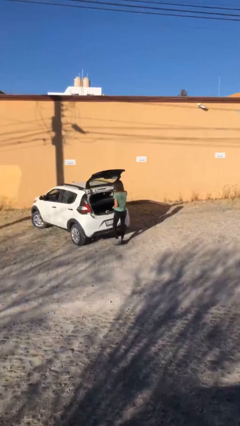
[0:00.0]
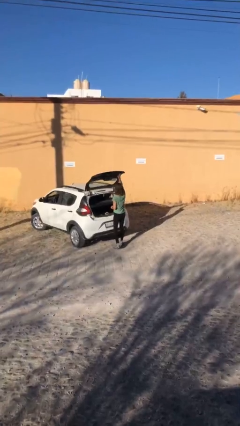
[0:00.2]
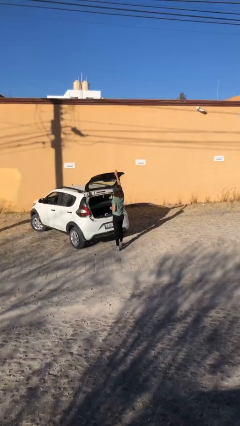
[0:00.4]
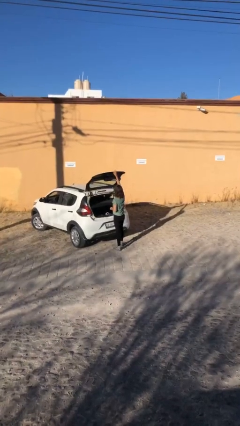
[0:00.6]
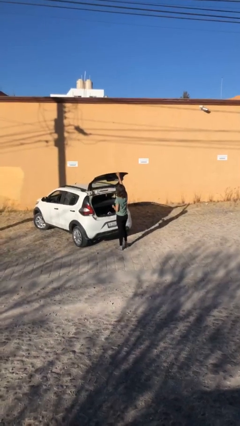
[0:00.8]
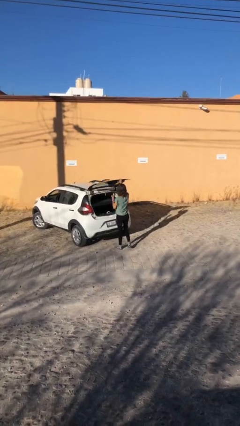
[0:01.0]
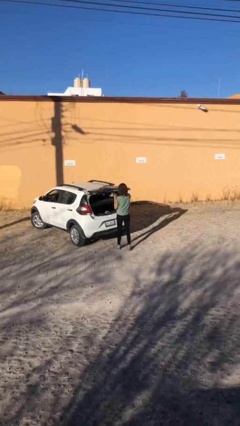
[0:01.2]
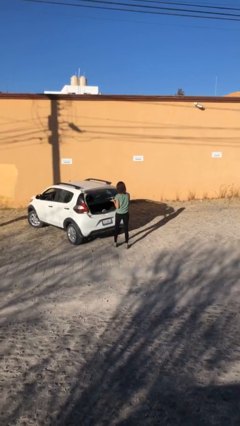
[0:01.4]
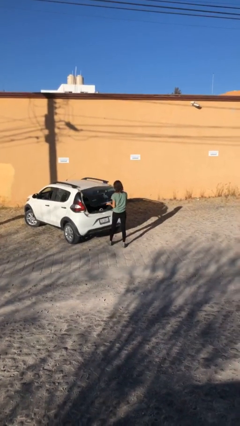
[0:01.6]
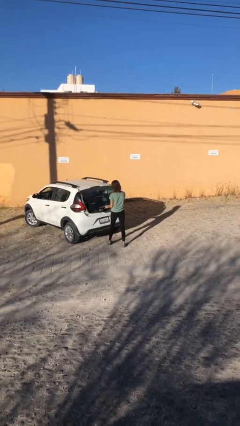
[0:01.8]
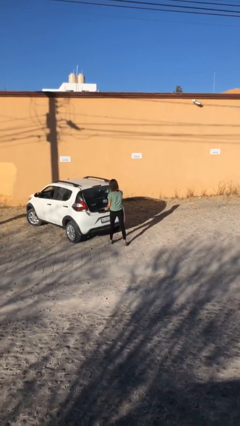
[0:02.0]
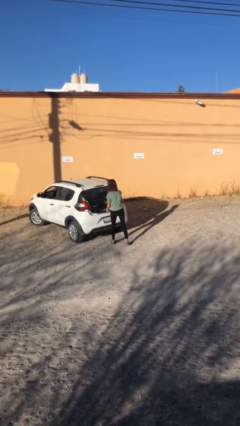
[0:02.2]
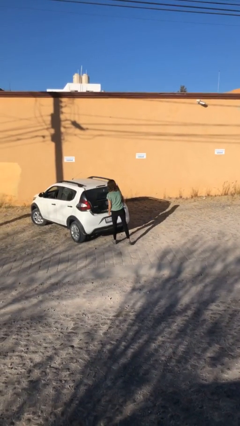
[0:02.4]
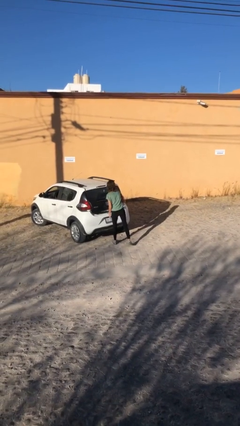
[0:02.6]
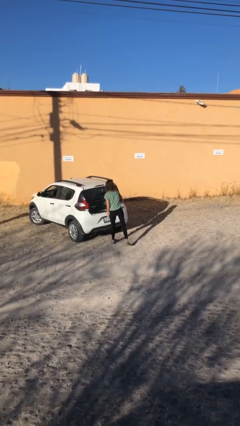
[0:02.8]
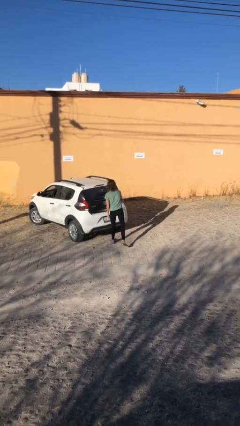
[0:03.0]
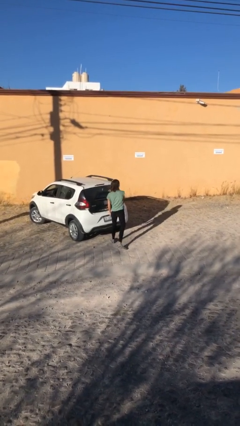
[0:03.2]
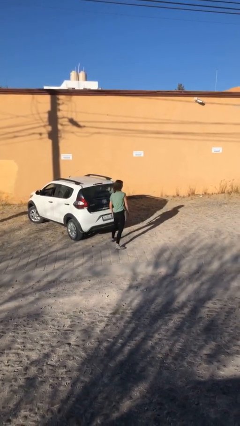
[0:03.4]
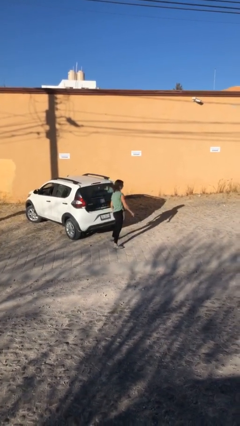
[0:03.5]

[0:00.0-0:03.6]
person closes car trunk

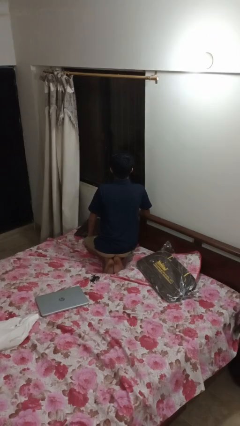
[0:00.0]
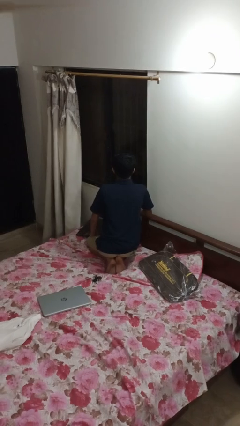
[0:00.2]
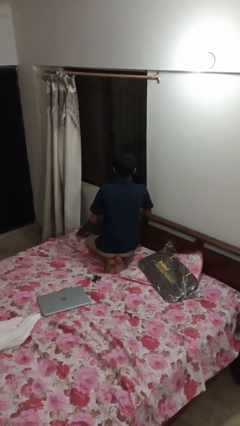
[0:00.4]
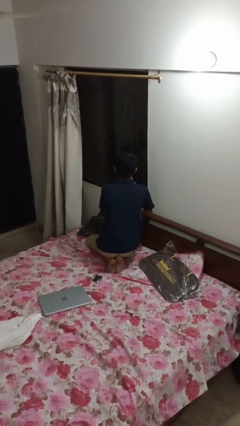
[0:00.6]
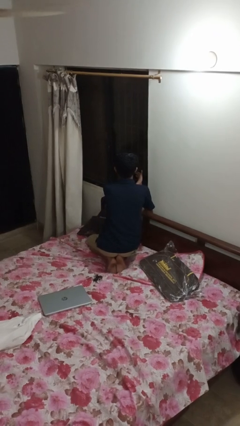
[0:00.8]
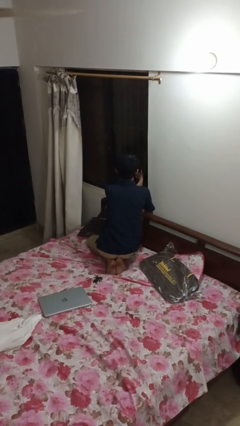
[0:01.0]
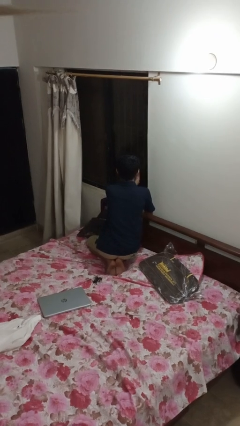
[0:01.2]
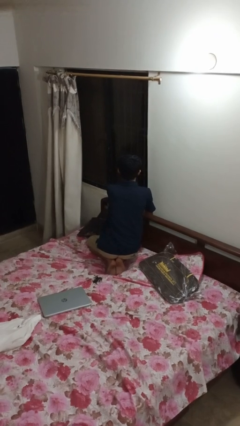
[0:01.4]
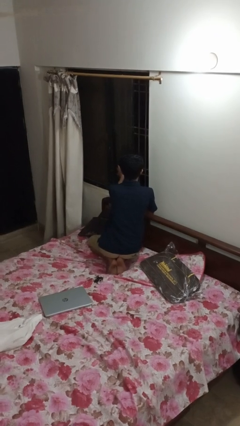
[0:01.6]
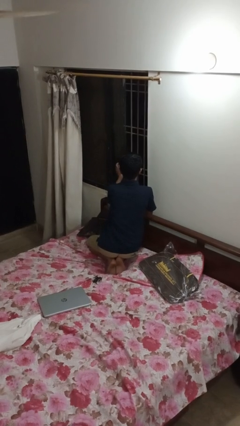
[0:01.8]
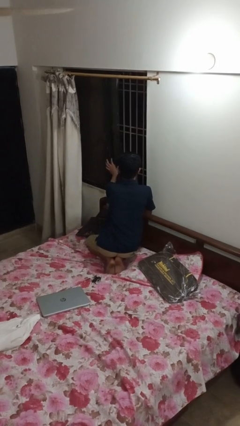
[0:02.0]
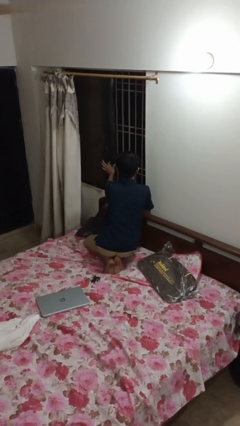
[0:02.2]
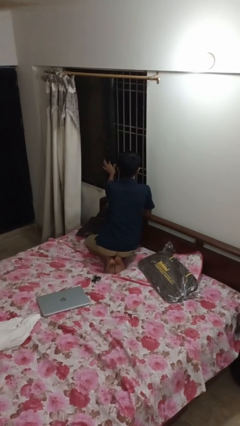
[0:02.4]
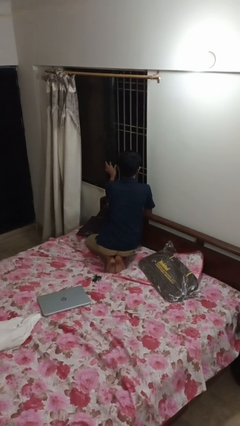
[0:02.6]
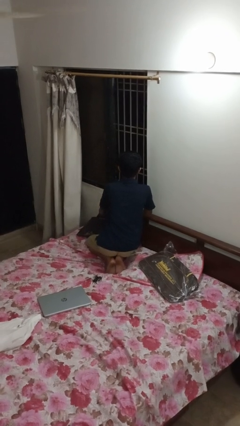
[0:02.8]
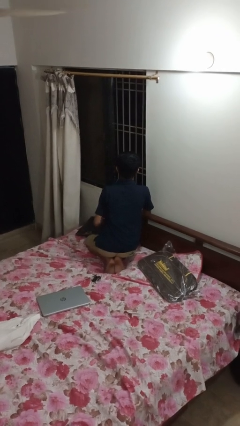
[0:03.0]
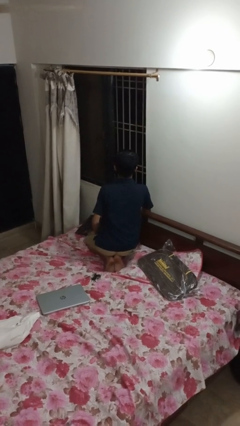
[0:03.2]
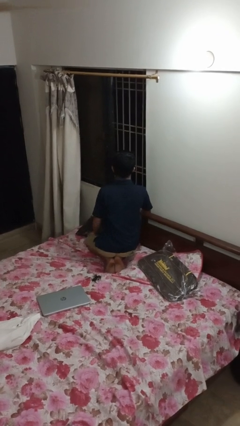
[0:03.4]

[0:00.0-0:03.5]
person opens home window

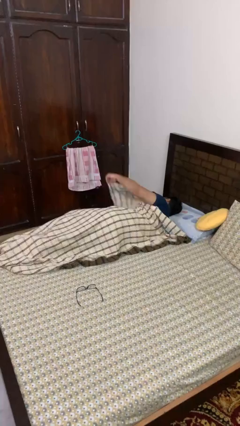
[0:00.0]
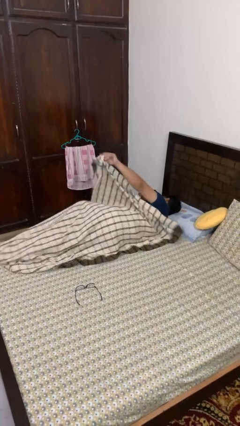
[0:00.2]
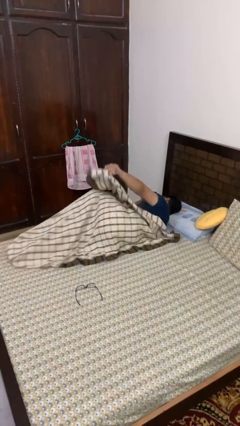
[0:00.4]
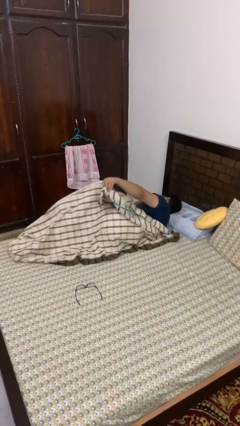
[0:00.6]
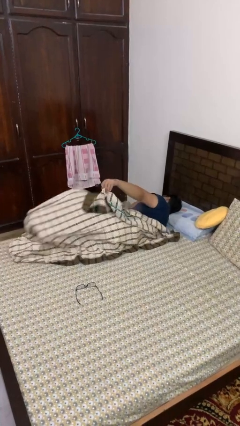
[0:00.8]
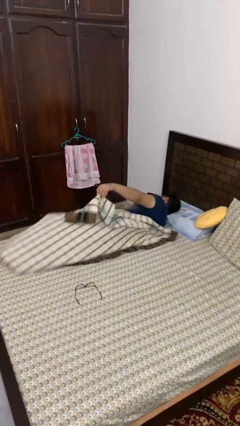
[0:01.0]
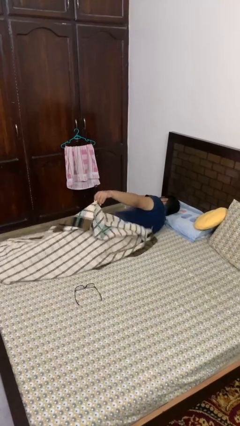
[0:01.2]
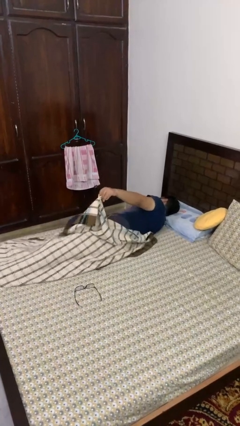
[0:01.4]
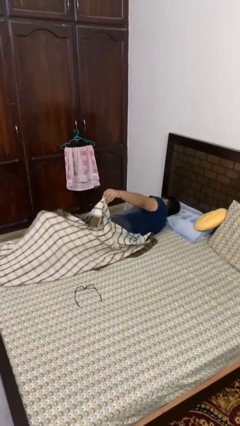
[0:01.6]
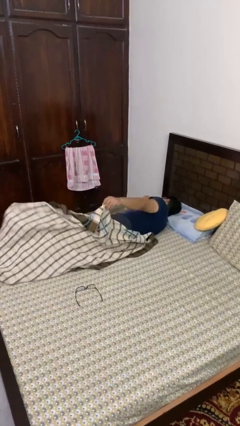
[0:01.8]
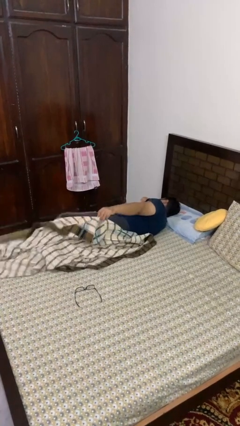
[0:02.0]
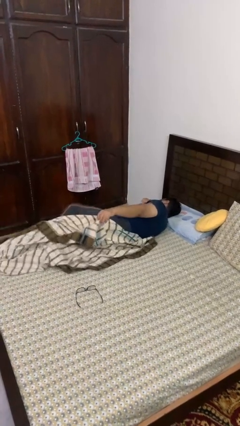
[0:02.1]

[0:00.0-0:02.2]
person uncovers with bedsheets

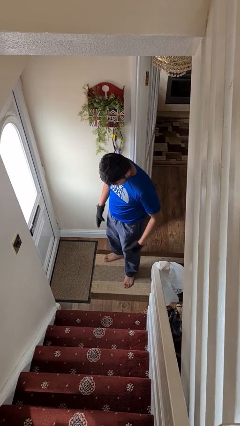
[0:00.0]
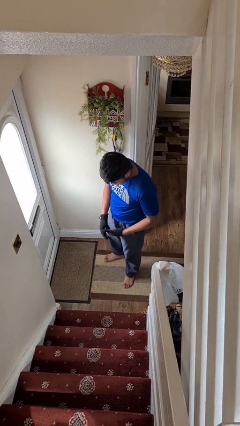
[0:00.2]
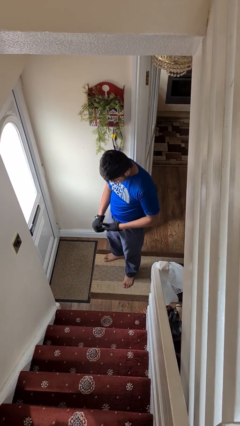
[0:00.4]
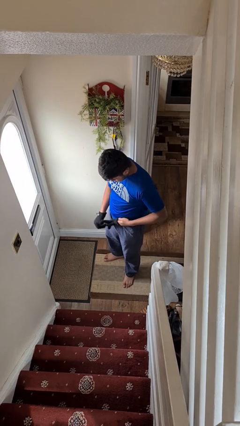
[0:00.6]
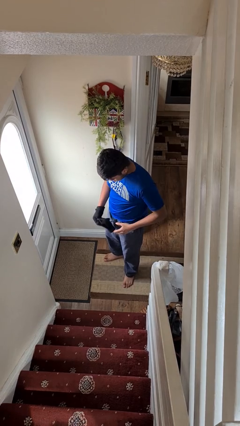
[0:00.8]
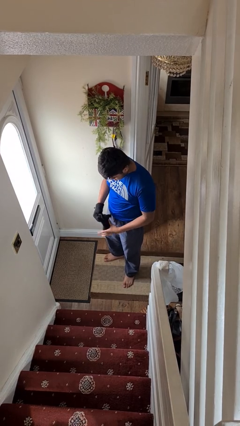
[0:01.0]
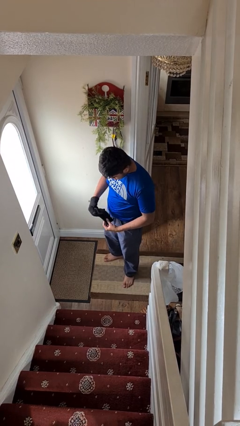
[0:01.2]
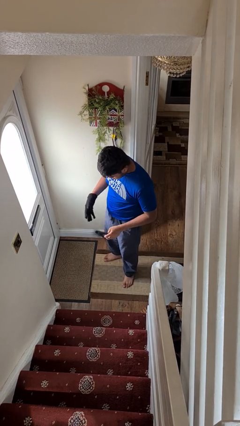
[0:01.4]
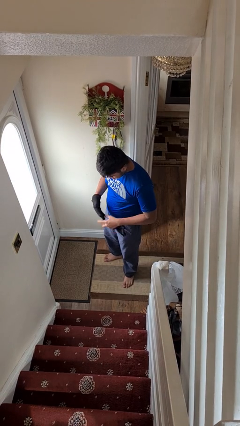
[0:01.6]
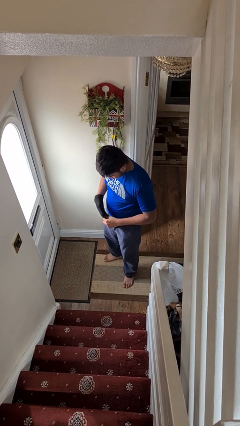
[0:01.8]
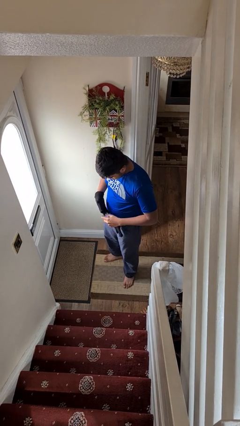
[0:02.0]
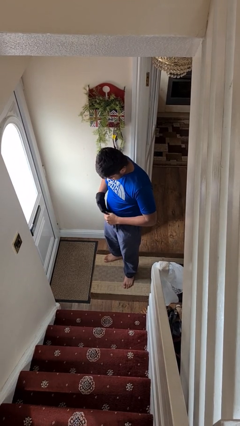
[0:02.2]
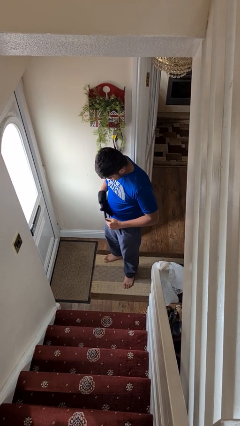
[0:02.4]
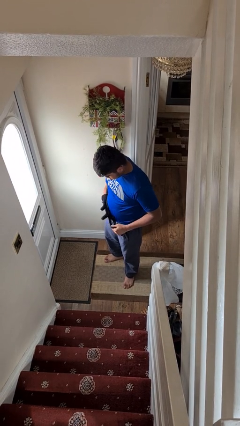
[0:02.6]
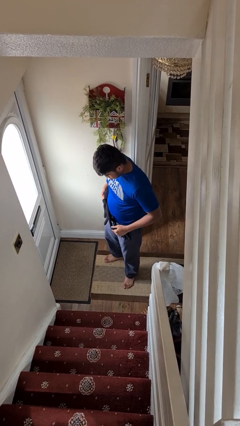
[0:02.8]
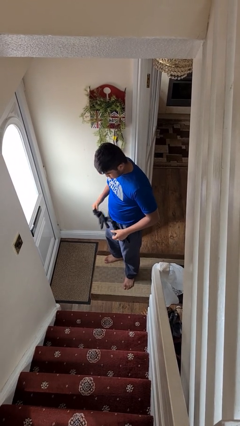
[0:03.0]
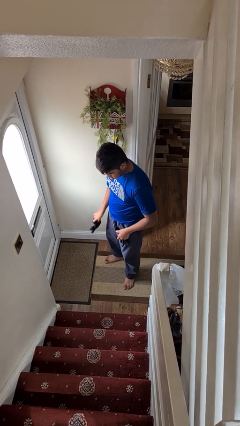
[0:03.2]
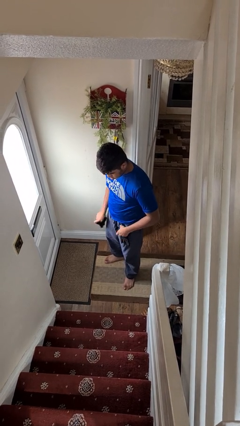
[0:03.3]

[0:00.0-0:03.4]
person takes off gloves

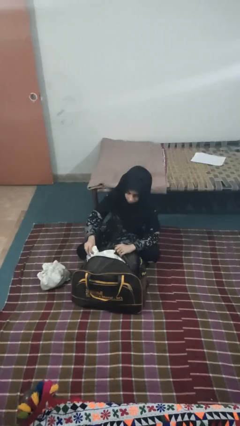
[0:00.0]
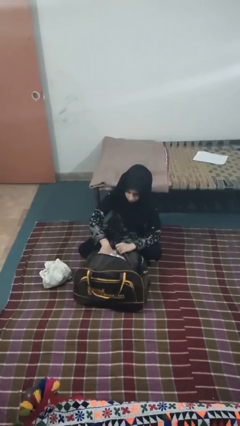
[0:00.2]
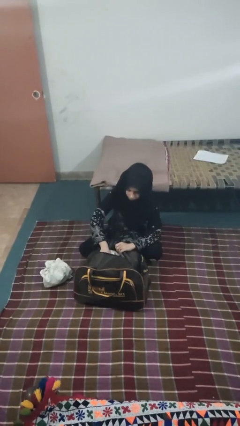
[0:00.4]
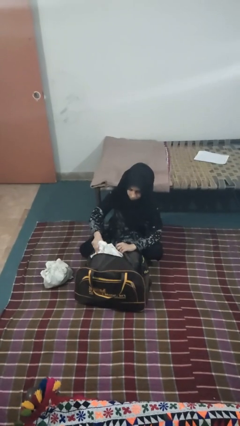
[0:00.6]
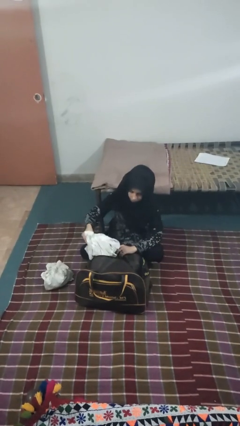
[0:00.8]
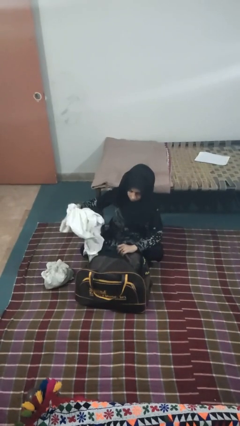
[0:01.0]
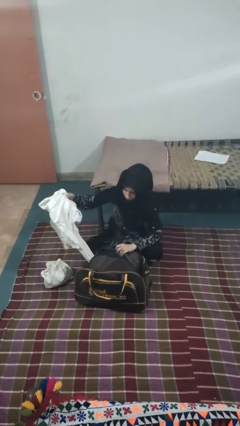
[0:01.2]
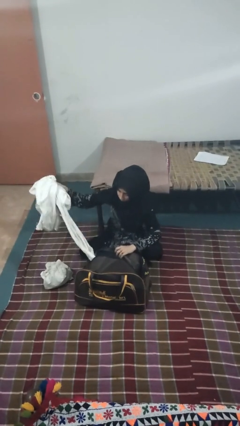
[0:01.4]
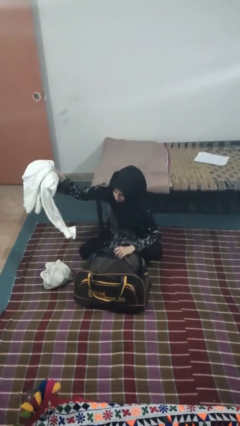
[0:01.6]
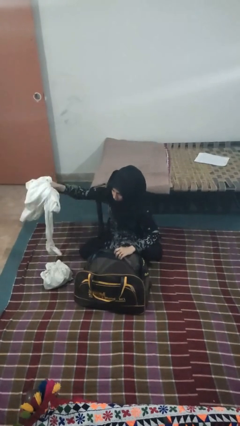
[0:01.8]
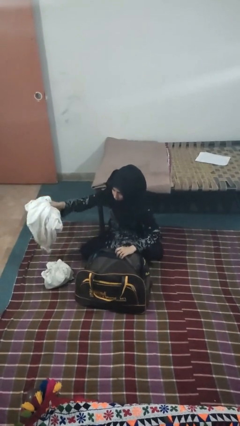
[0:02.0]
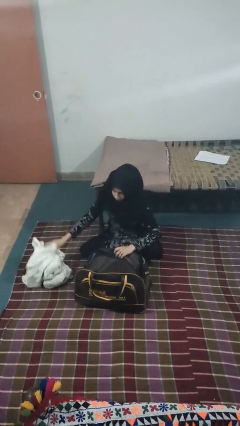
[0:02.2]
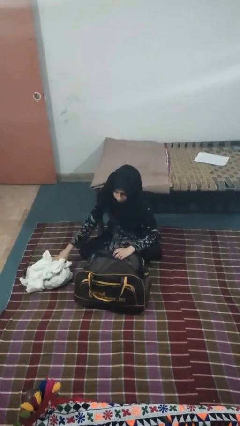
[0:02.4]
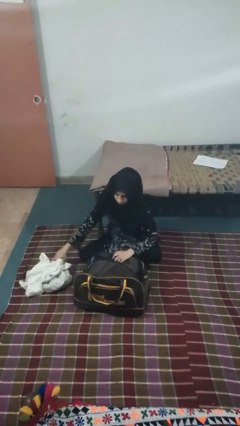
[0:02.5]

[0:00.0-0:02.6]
person unloads clothes from suitcase

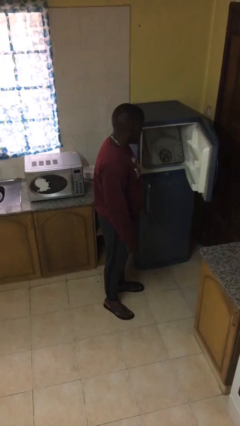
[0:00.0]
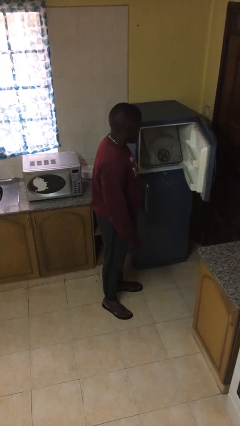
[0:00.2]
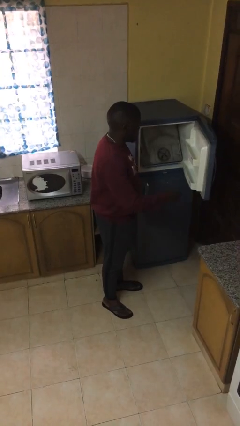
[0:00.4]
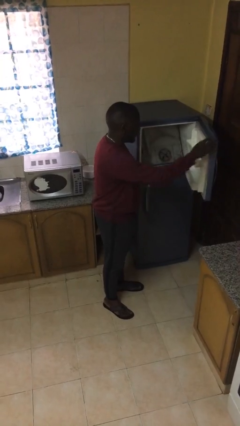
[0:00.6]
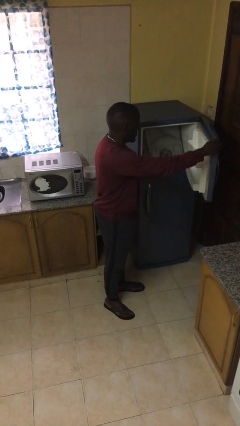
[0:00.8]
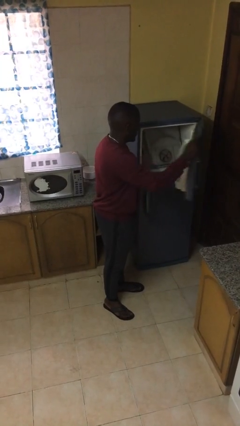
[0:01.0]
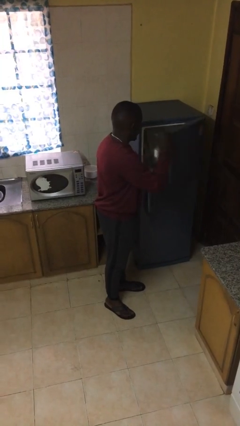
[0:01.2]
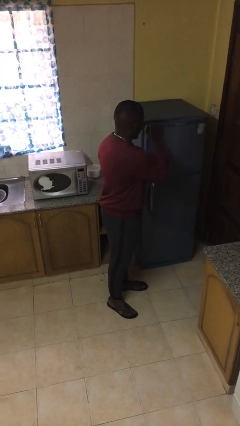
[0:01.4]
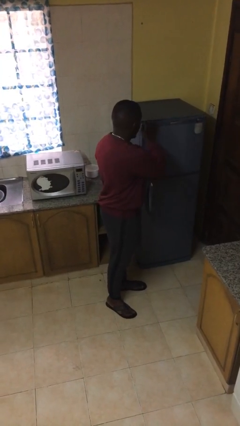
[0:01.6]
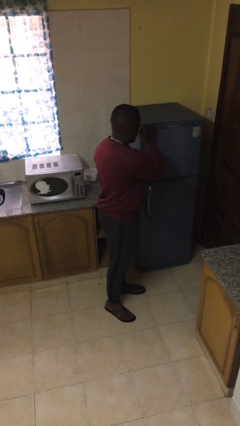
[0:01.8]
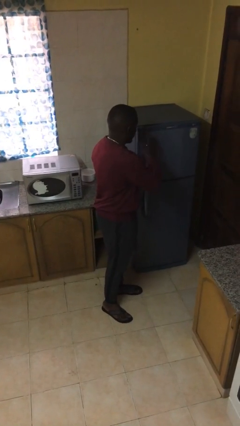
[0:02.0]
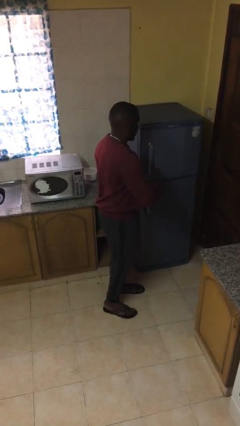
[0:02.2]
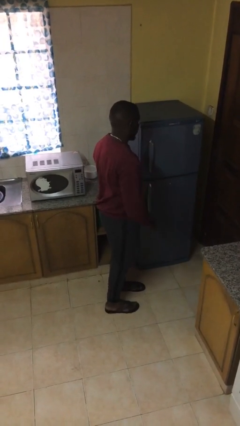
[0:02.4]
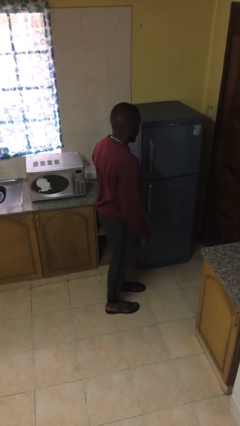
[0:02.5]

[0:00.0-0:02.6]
person closes refrigerator
